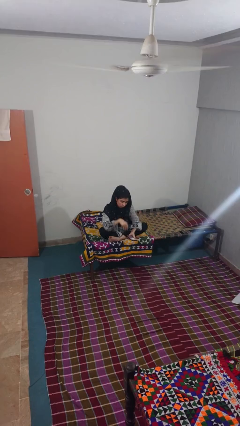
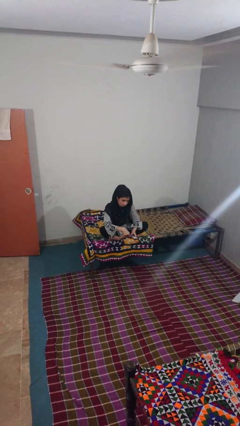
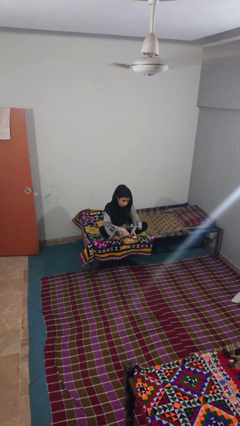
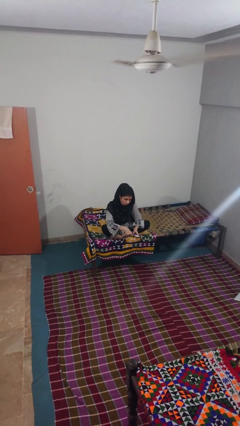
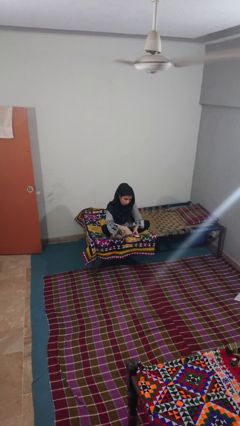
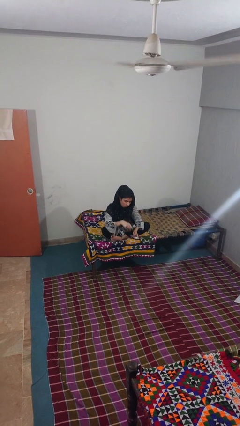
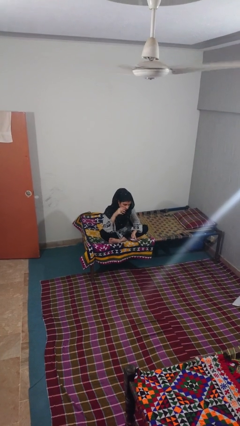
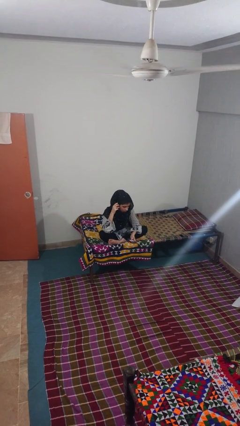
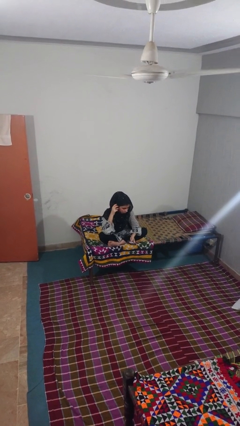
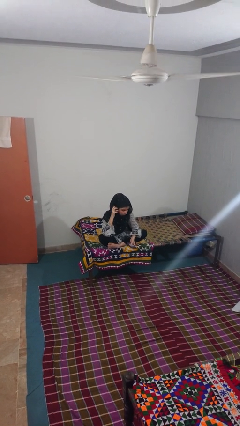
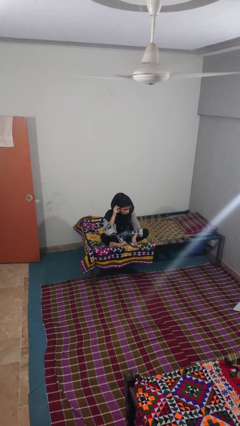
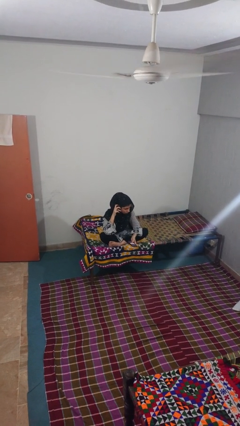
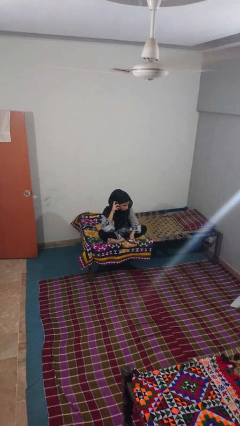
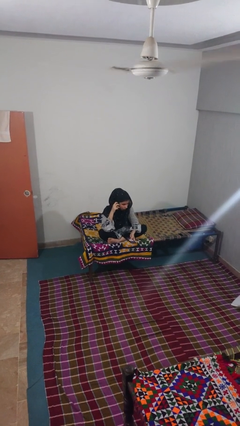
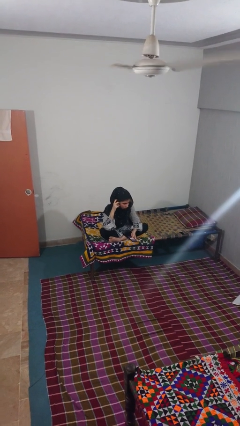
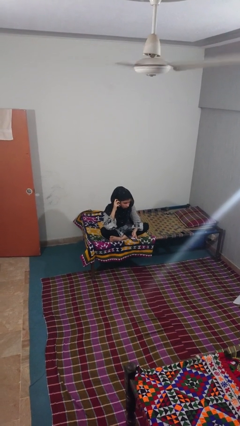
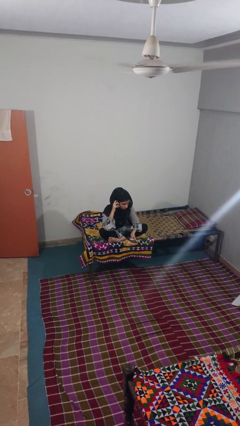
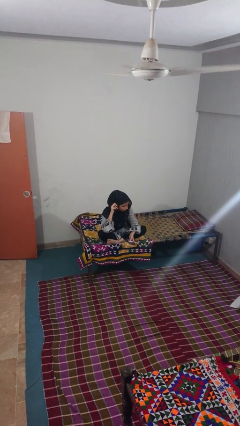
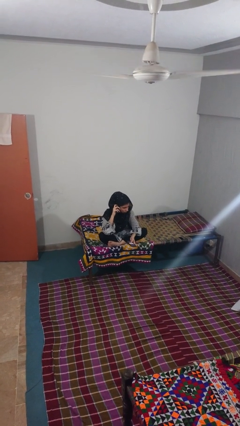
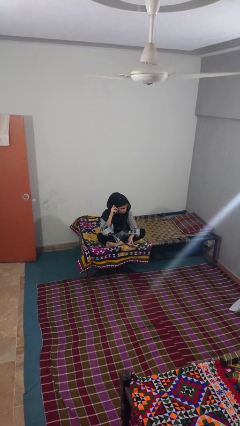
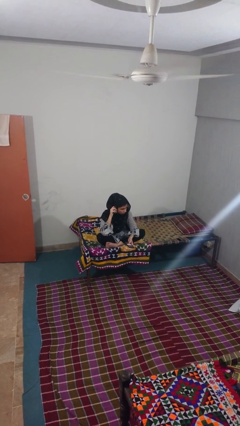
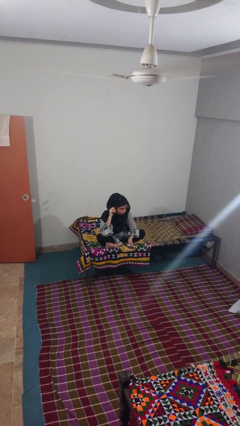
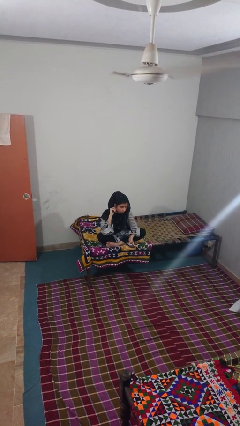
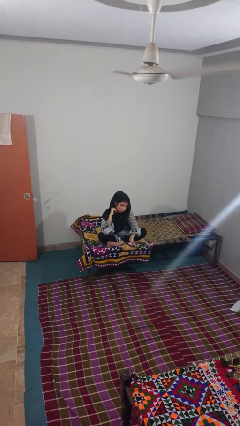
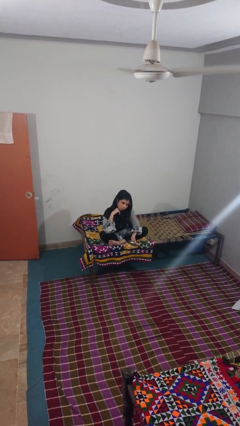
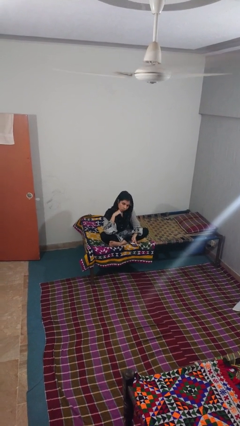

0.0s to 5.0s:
person touches earlobe

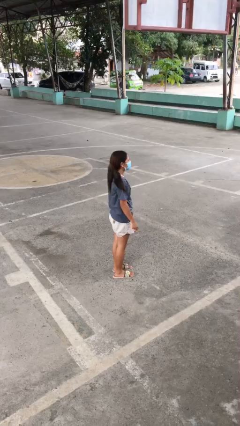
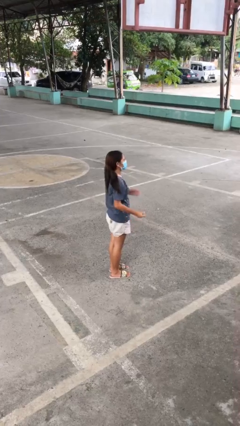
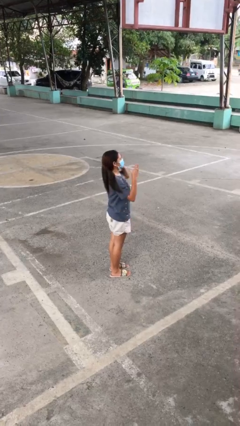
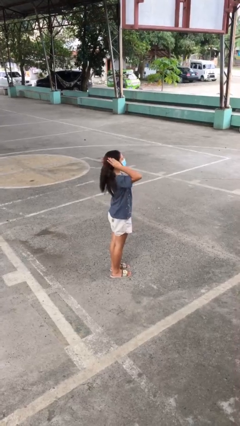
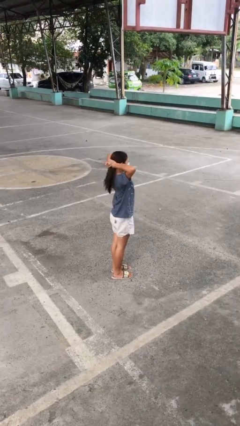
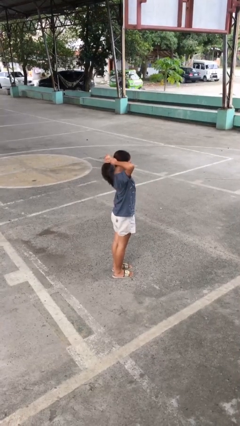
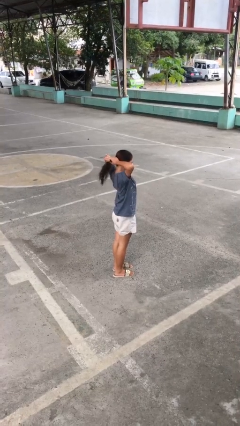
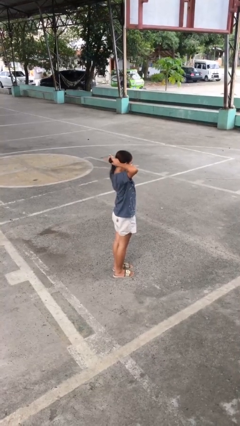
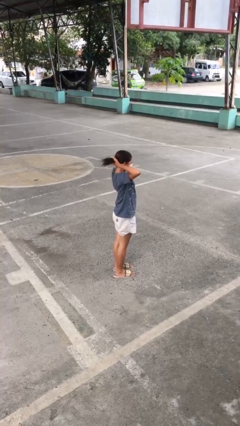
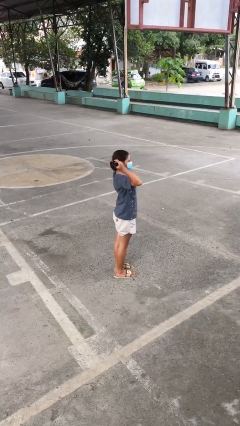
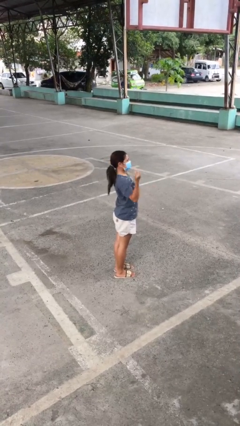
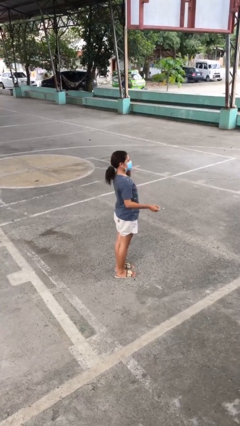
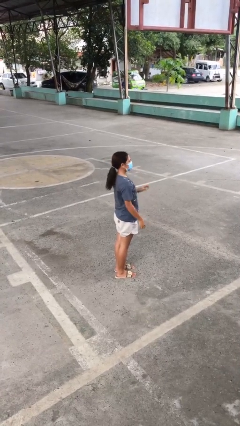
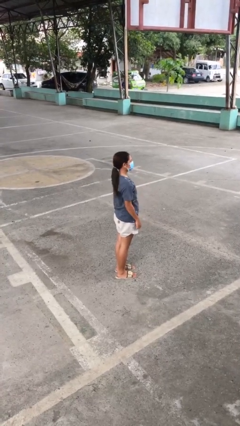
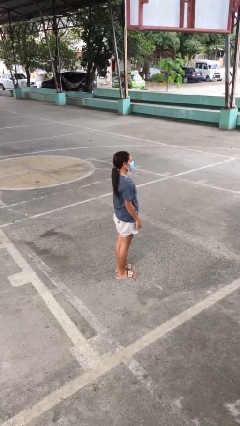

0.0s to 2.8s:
person puts hair in ponytail

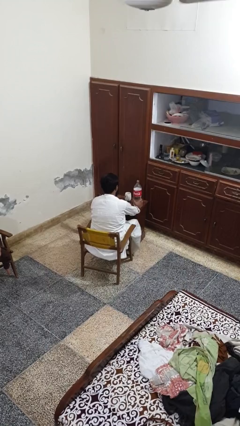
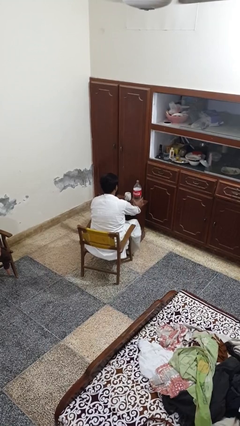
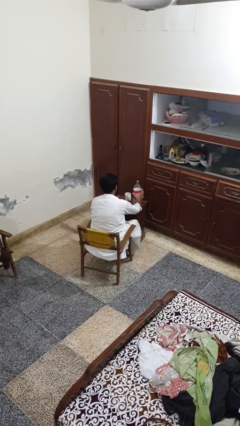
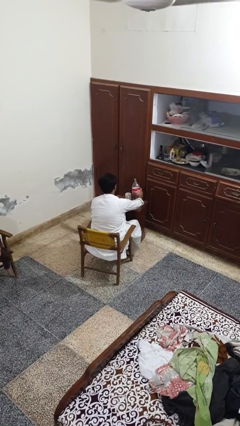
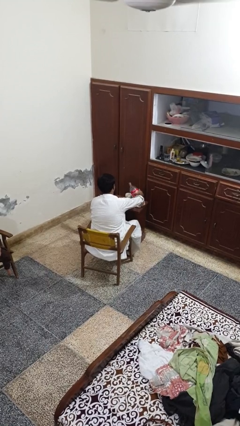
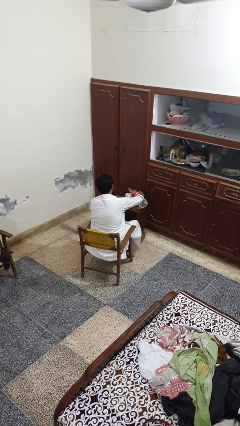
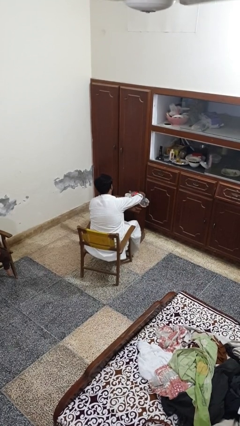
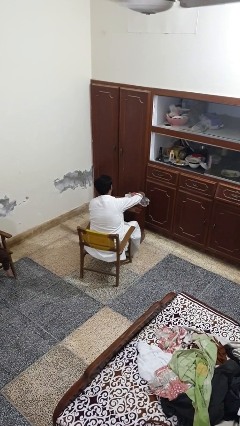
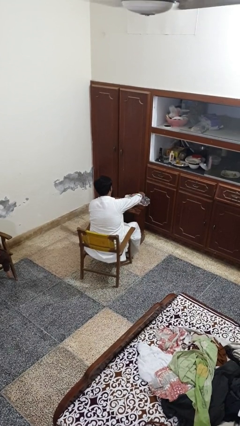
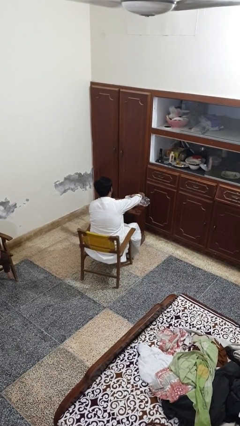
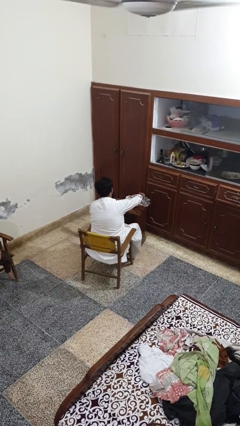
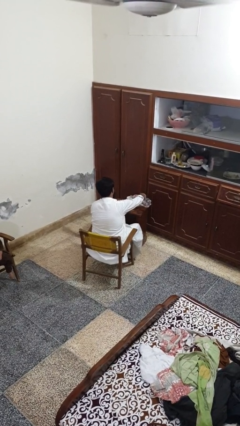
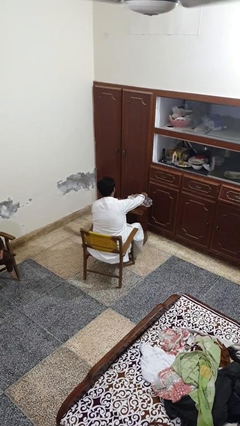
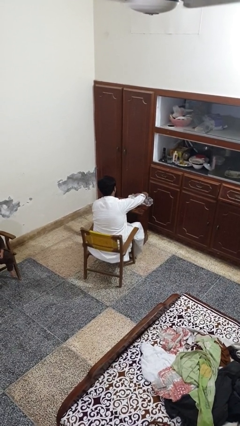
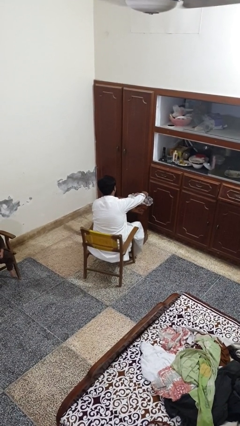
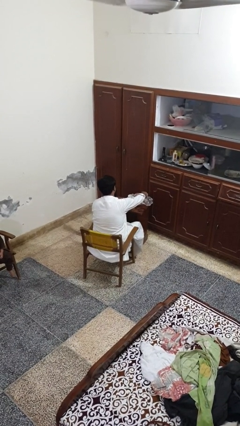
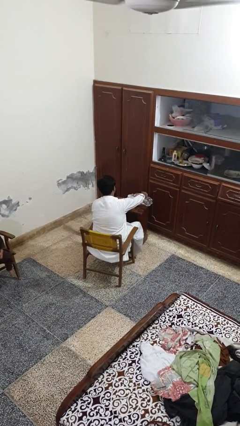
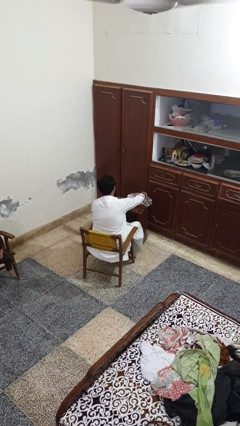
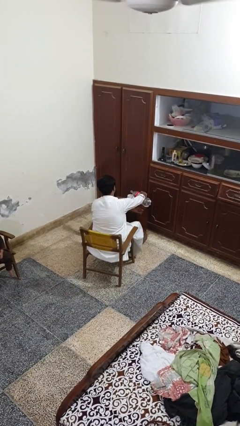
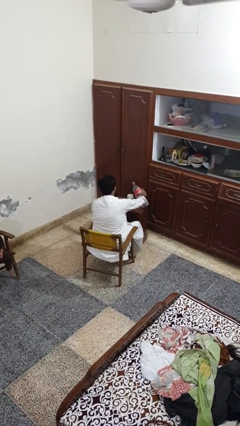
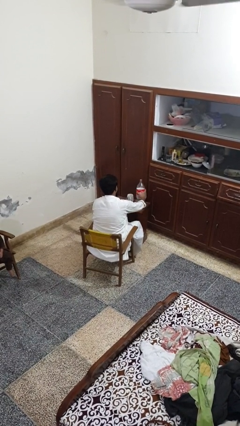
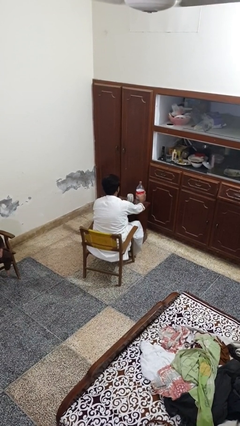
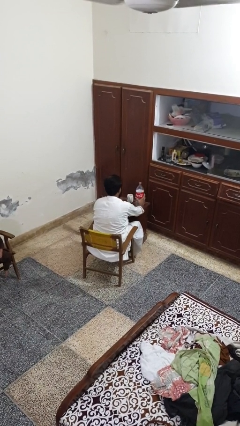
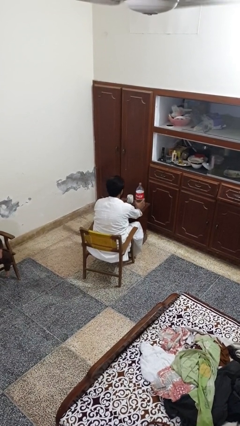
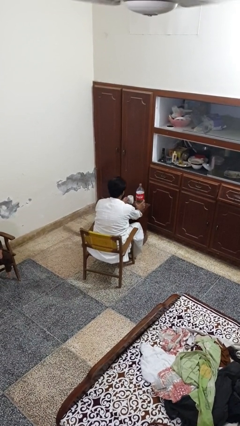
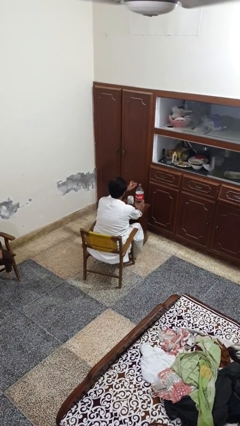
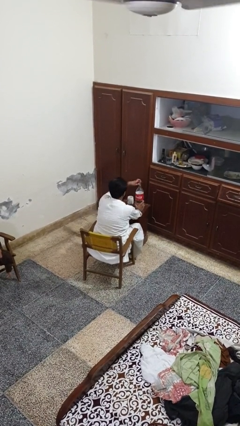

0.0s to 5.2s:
person pours liquid into cup

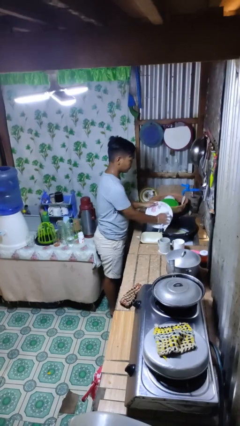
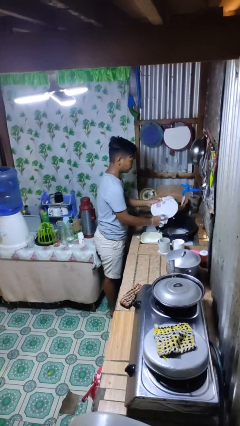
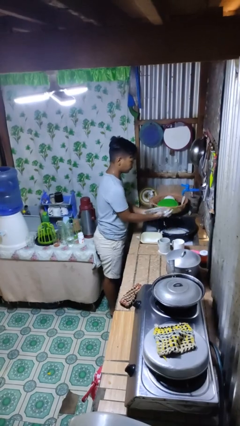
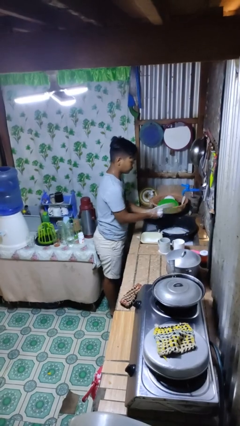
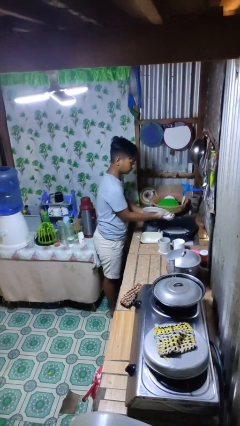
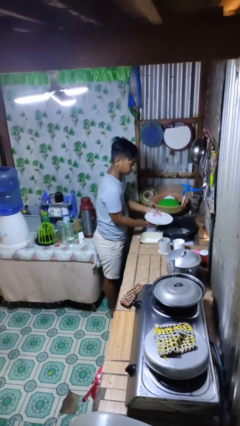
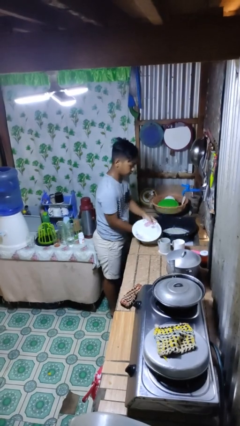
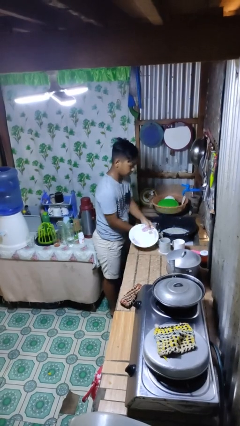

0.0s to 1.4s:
person washes dish

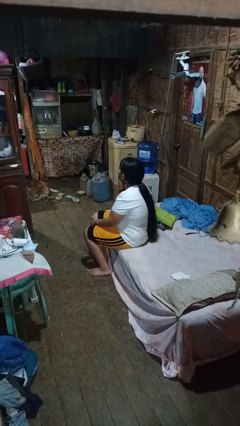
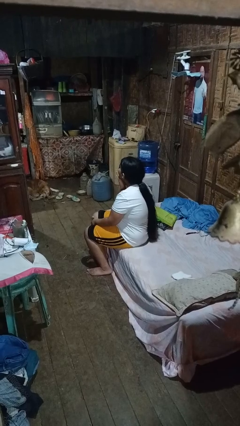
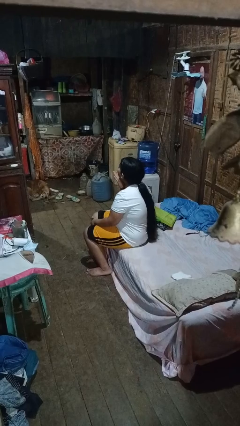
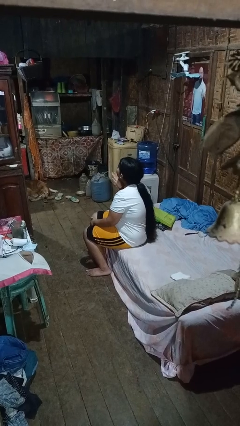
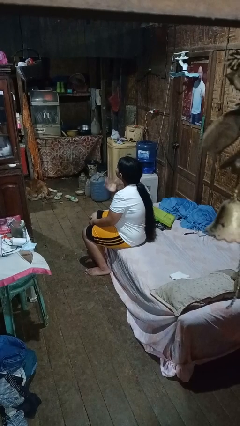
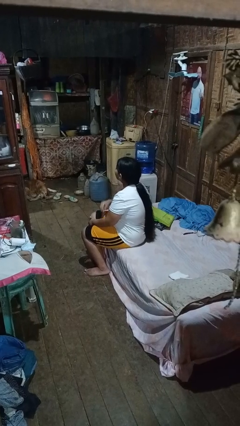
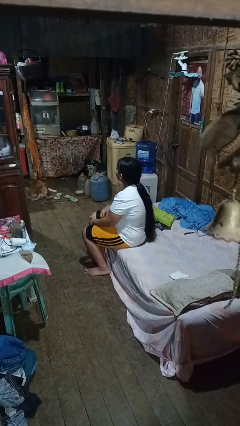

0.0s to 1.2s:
person gestures blow kiss

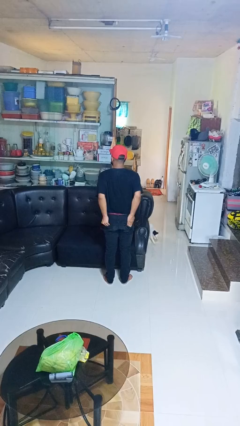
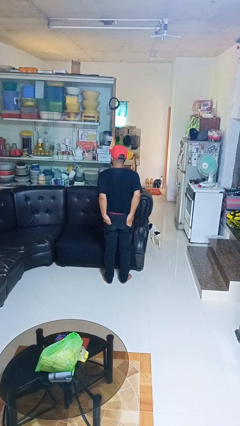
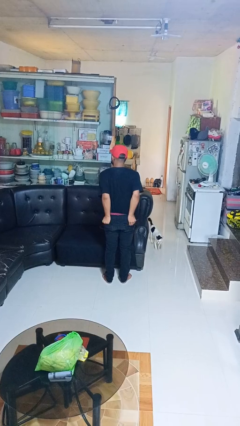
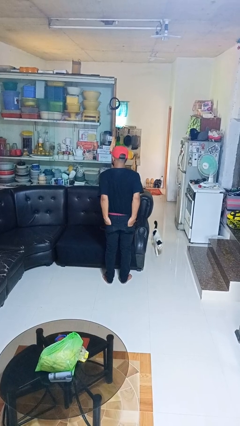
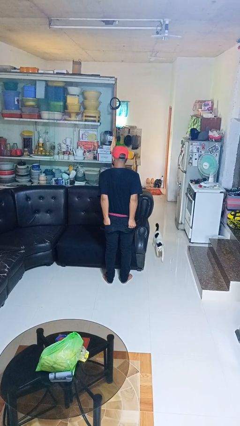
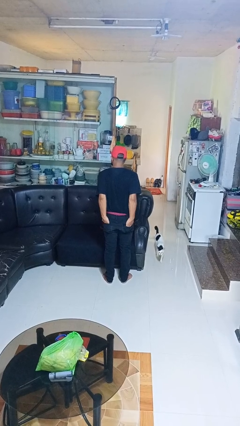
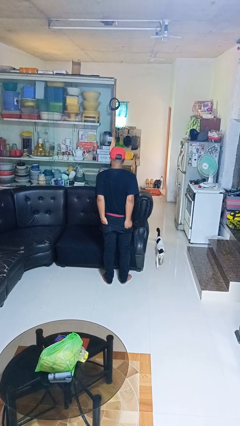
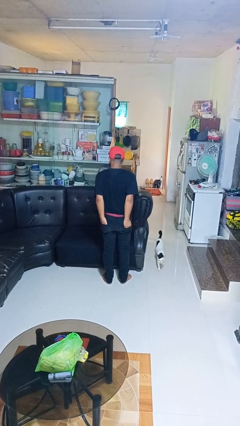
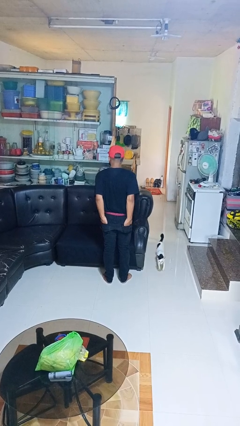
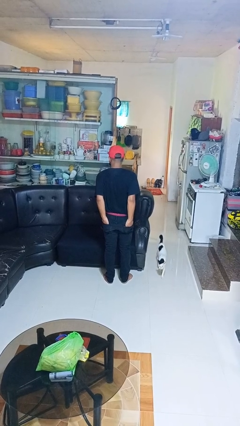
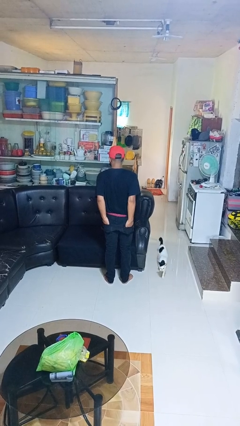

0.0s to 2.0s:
person puts hands in back pockets
